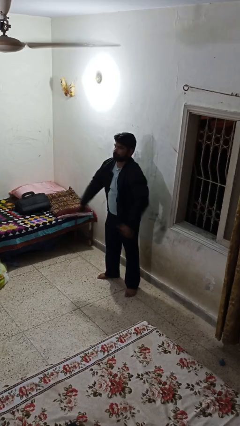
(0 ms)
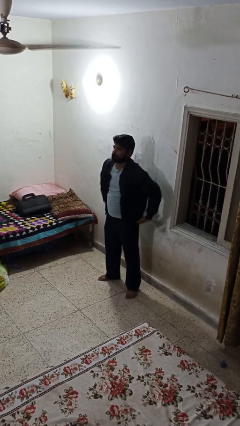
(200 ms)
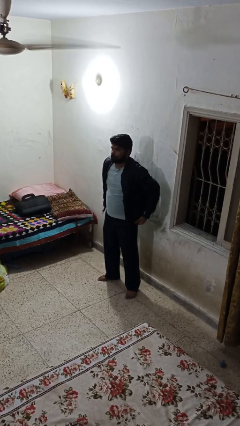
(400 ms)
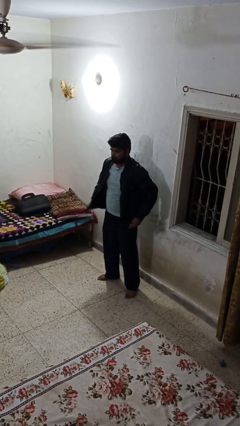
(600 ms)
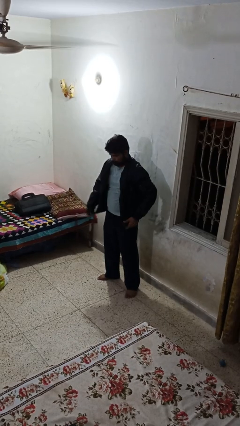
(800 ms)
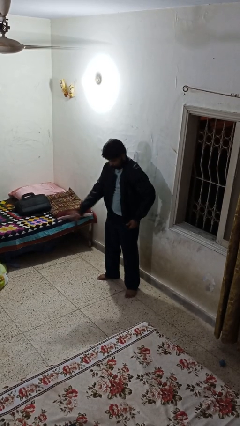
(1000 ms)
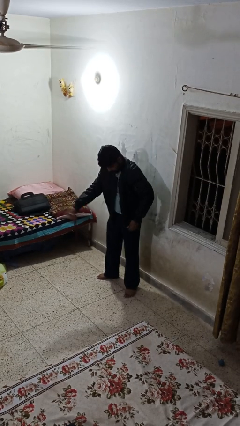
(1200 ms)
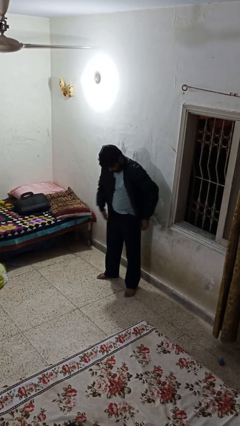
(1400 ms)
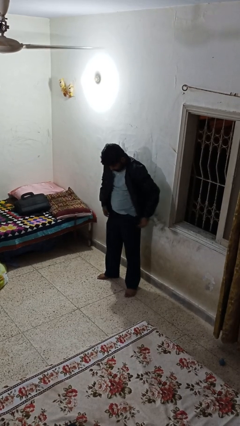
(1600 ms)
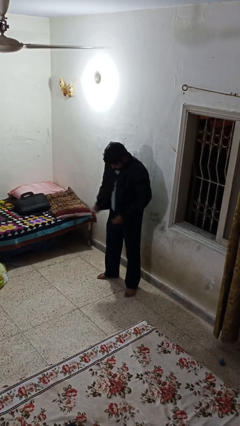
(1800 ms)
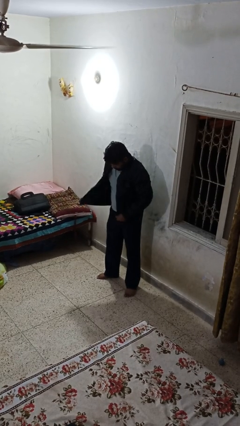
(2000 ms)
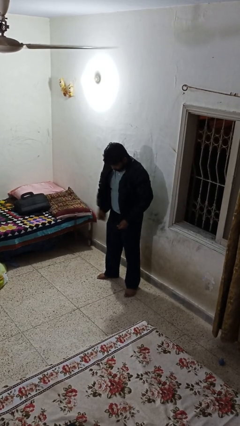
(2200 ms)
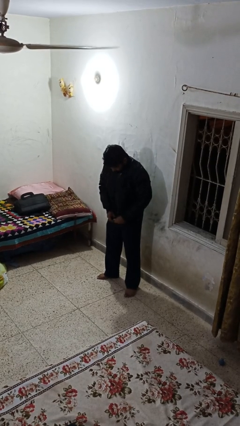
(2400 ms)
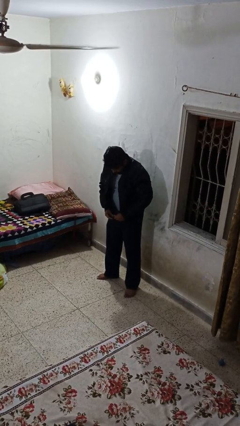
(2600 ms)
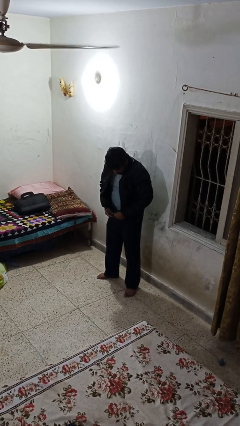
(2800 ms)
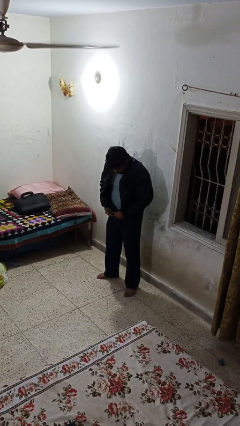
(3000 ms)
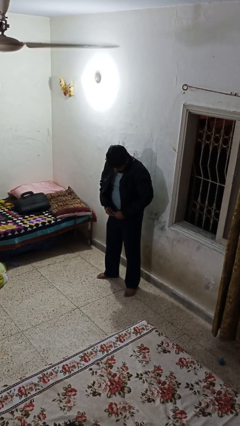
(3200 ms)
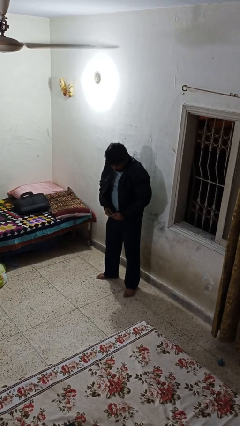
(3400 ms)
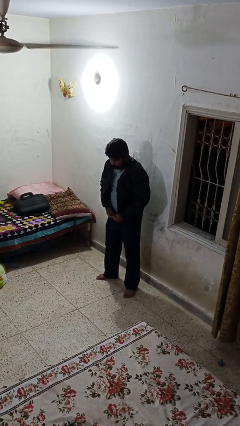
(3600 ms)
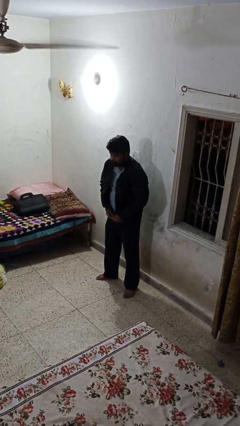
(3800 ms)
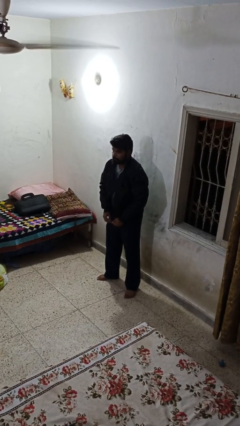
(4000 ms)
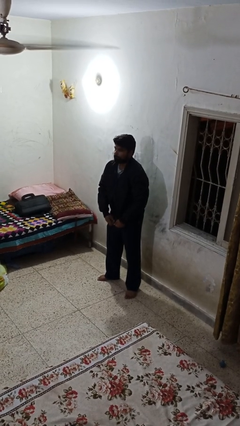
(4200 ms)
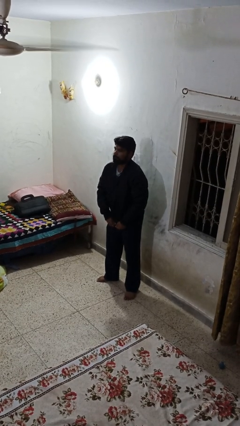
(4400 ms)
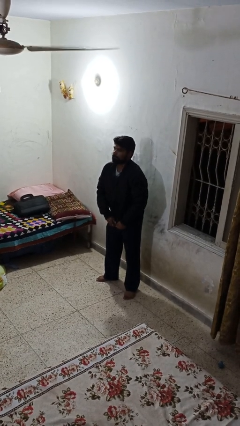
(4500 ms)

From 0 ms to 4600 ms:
person zips up jacket

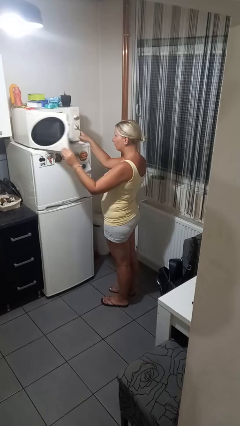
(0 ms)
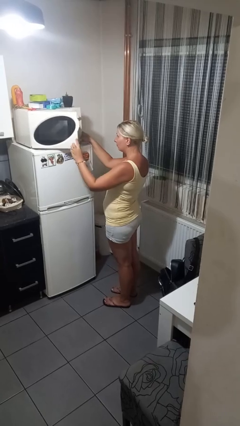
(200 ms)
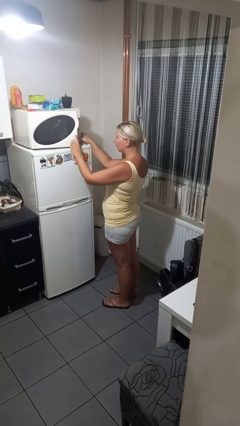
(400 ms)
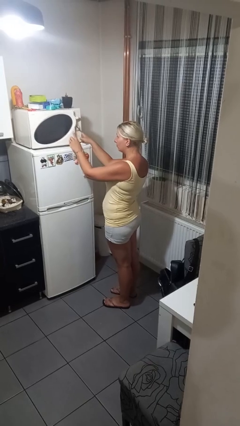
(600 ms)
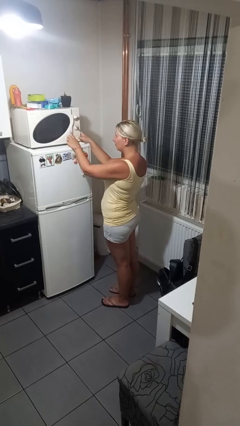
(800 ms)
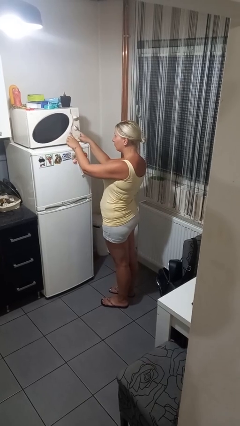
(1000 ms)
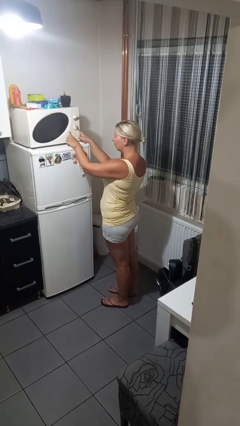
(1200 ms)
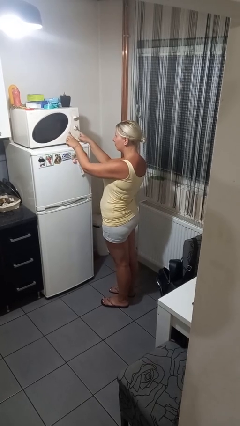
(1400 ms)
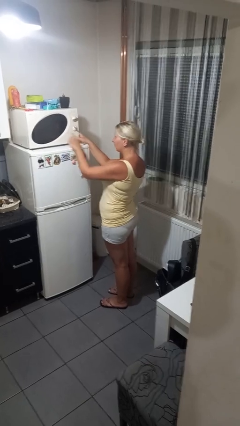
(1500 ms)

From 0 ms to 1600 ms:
person closes microwave

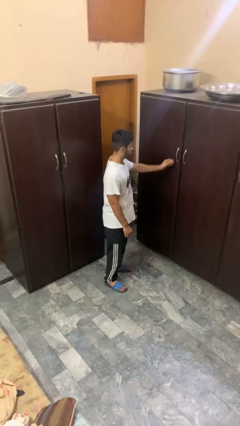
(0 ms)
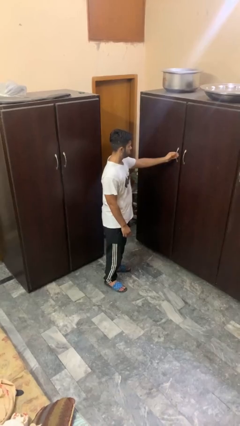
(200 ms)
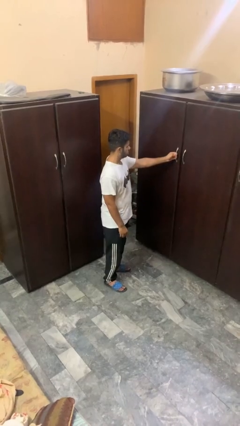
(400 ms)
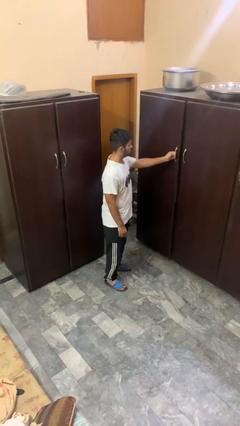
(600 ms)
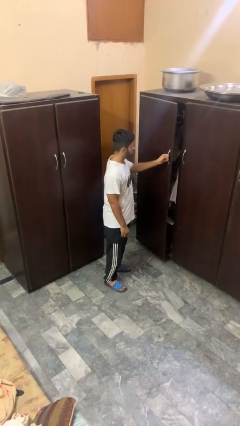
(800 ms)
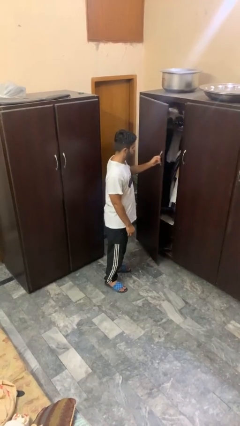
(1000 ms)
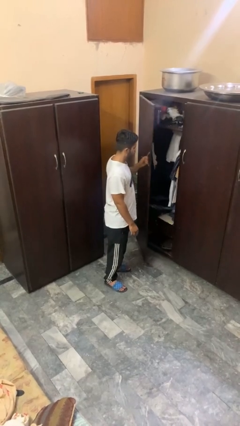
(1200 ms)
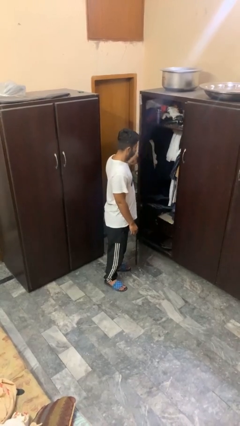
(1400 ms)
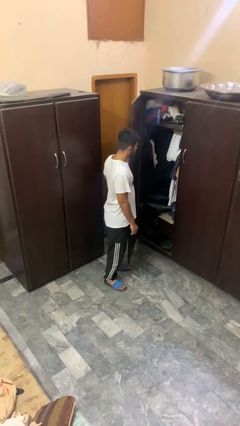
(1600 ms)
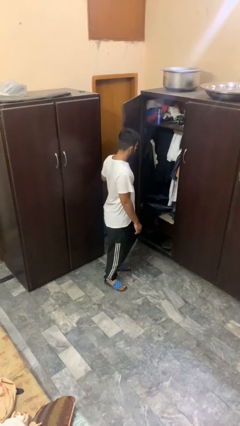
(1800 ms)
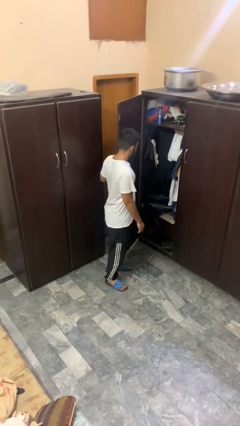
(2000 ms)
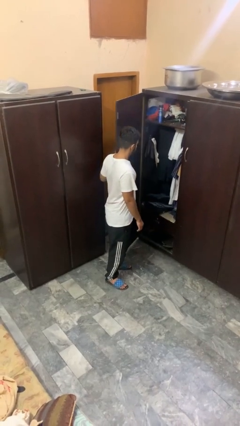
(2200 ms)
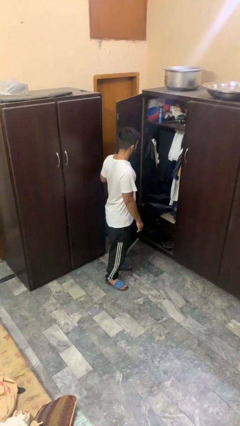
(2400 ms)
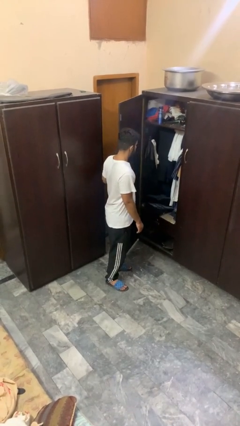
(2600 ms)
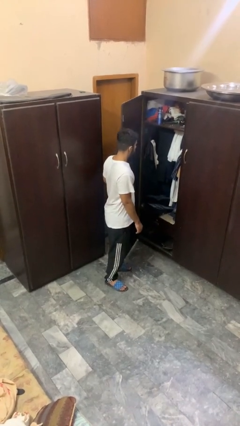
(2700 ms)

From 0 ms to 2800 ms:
person opens closet door

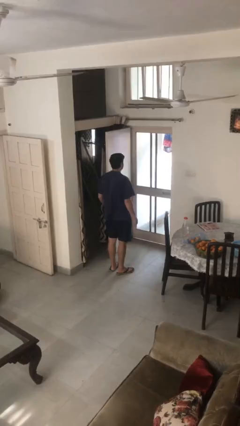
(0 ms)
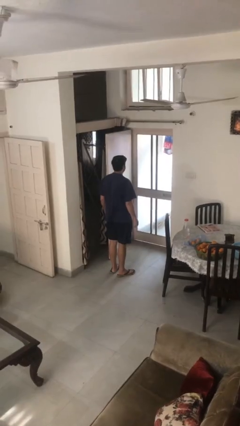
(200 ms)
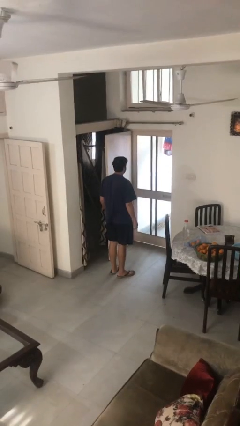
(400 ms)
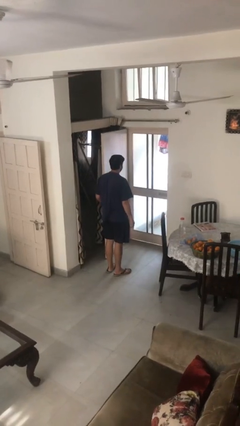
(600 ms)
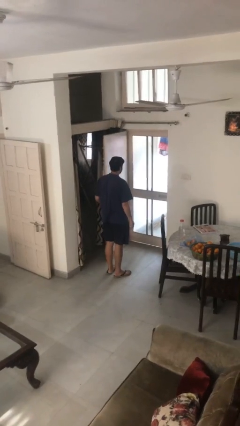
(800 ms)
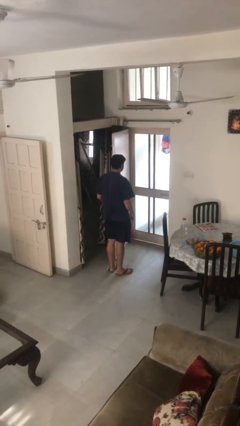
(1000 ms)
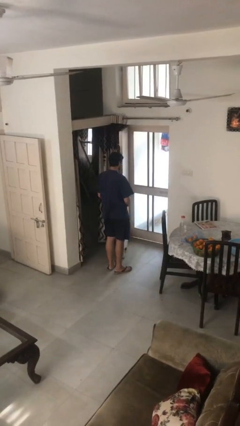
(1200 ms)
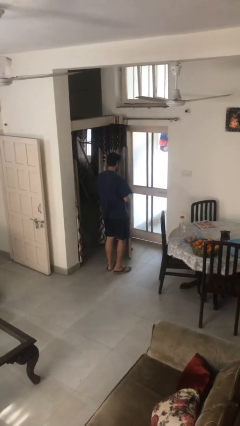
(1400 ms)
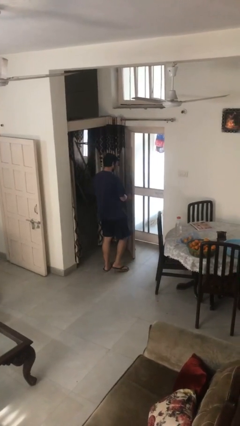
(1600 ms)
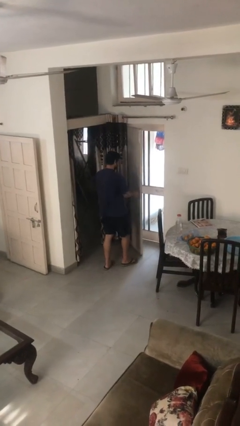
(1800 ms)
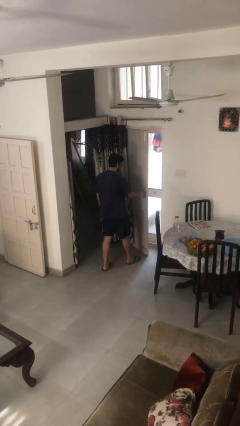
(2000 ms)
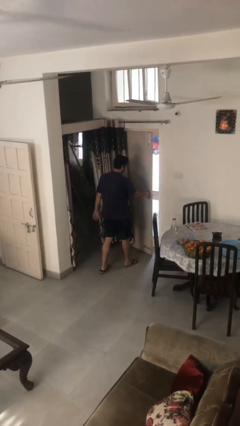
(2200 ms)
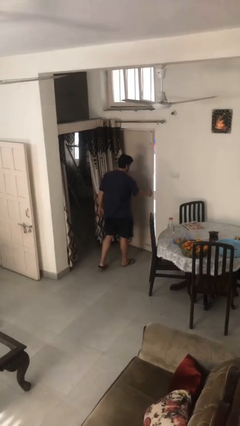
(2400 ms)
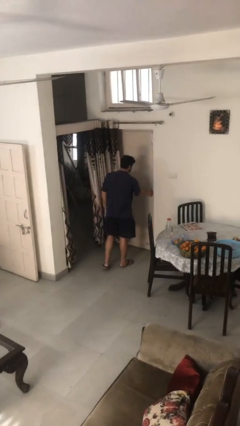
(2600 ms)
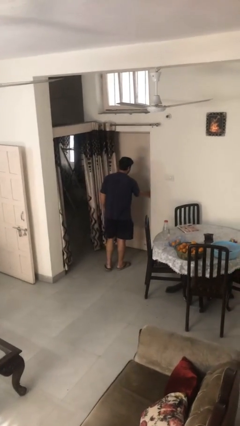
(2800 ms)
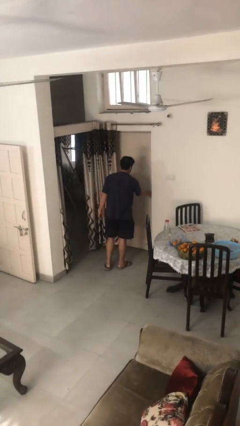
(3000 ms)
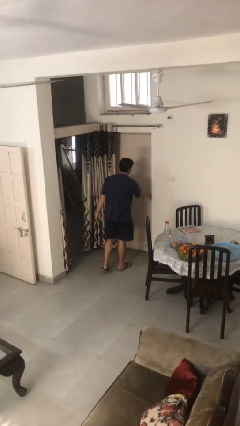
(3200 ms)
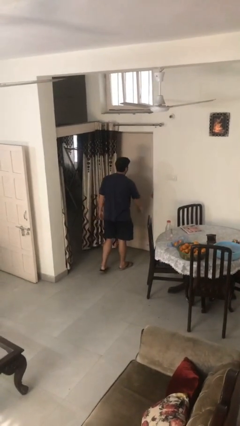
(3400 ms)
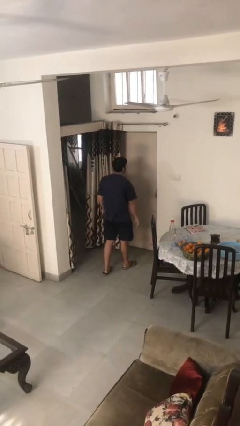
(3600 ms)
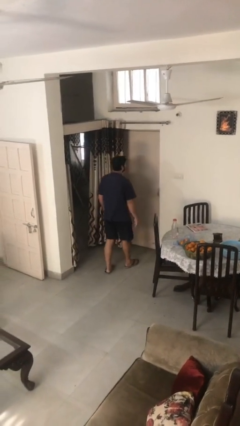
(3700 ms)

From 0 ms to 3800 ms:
person closes facility door

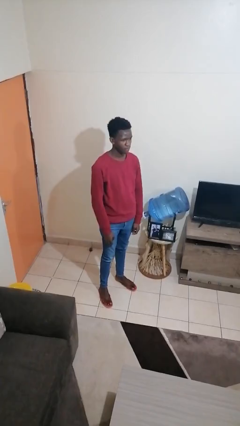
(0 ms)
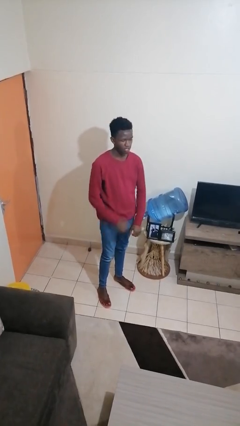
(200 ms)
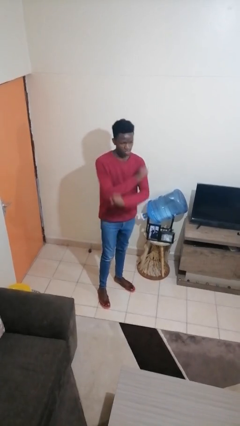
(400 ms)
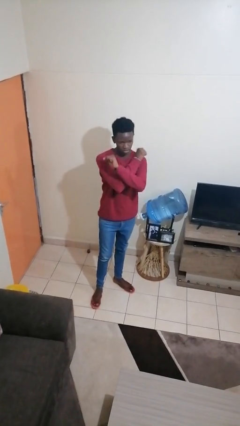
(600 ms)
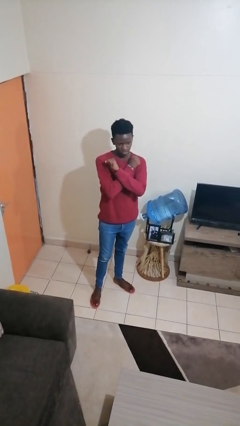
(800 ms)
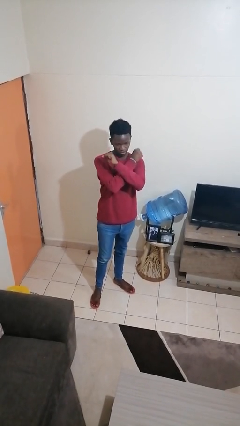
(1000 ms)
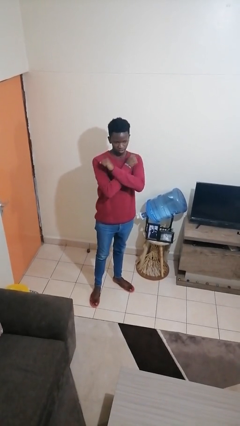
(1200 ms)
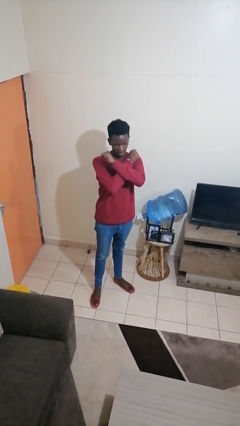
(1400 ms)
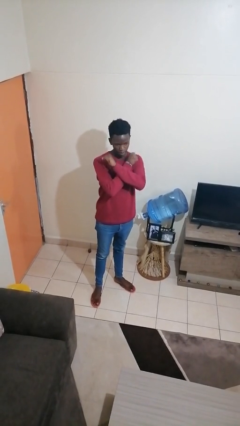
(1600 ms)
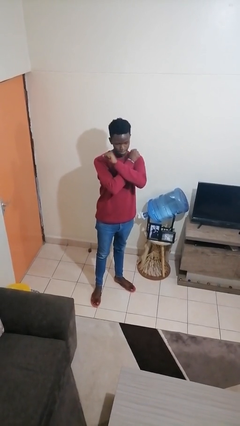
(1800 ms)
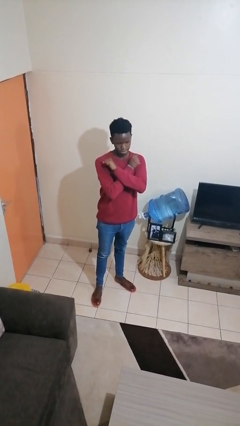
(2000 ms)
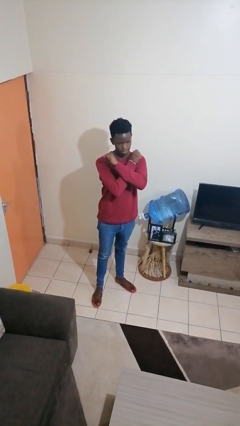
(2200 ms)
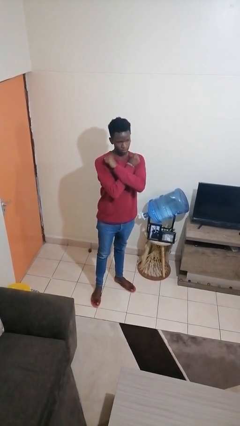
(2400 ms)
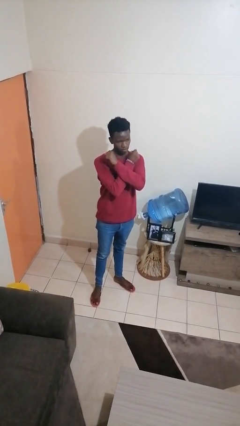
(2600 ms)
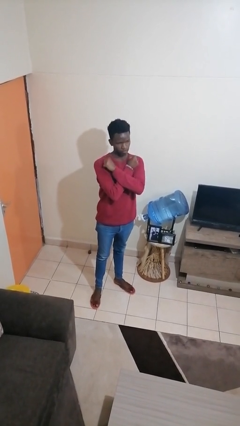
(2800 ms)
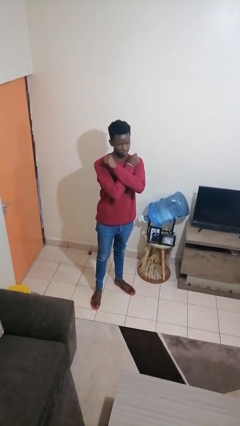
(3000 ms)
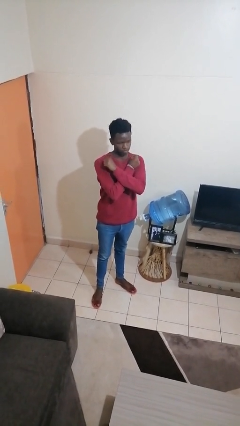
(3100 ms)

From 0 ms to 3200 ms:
person gestures arms x

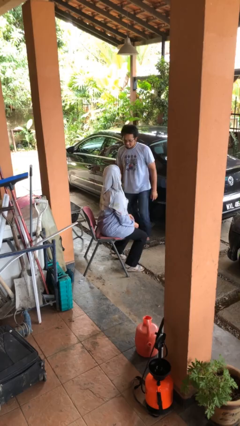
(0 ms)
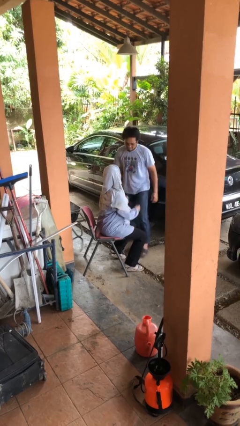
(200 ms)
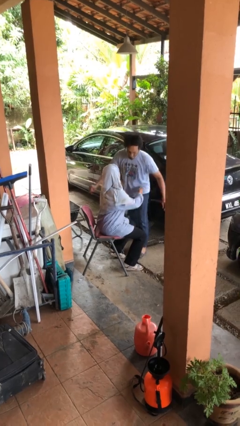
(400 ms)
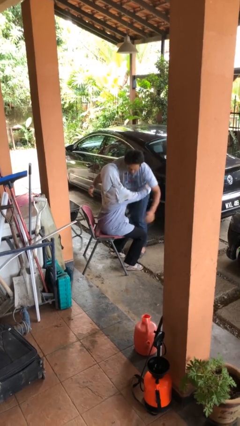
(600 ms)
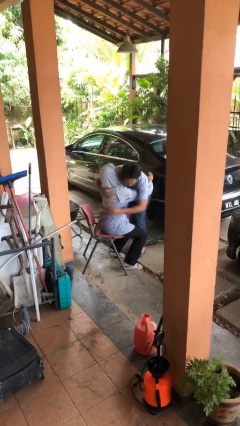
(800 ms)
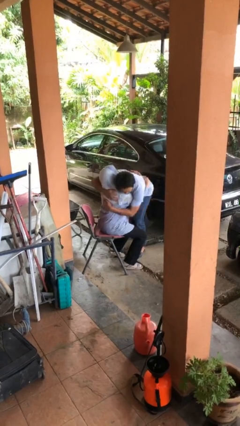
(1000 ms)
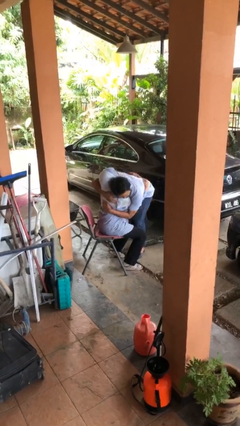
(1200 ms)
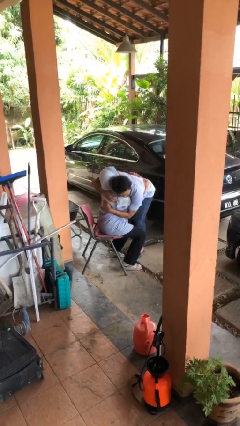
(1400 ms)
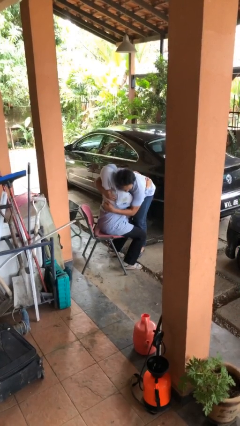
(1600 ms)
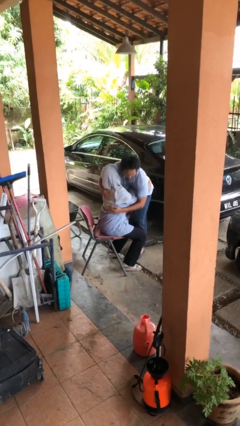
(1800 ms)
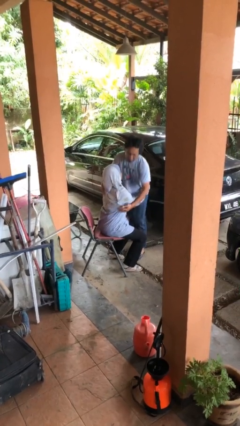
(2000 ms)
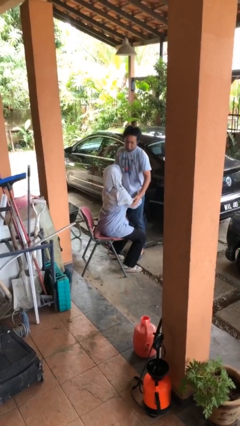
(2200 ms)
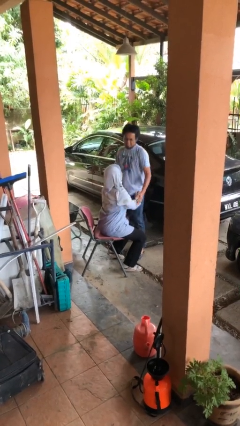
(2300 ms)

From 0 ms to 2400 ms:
person embraces person
